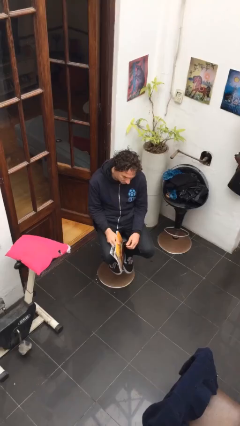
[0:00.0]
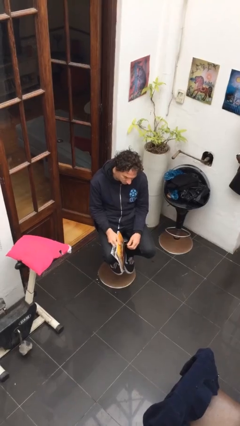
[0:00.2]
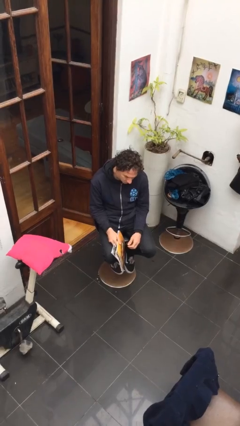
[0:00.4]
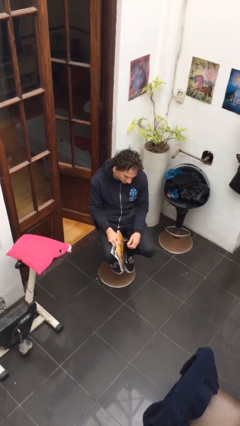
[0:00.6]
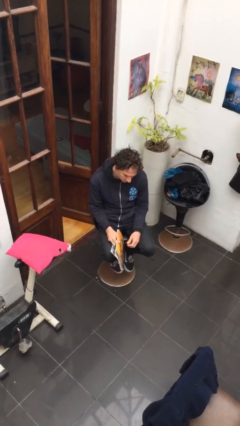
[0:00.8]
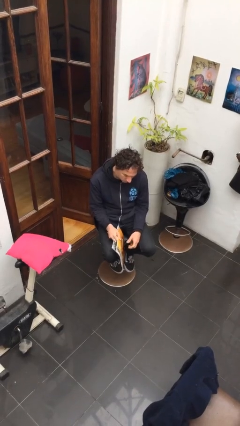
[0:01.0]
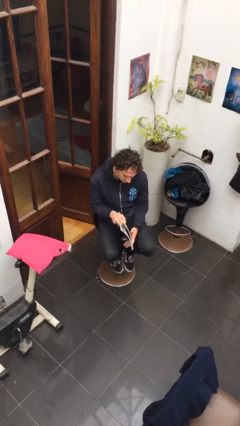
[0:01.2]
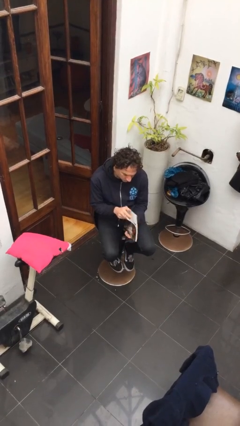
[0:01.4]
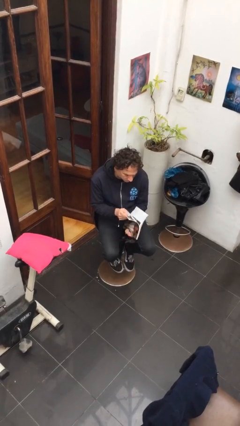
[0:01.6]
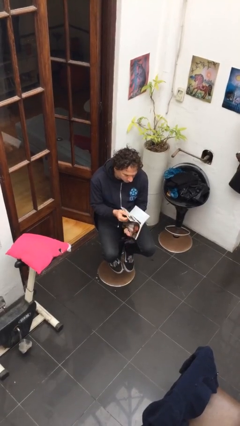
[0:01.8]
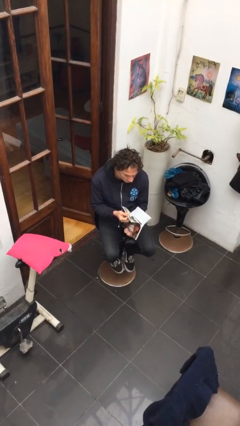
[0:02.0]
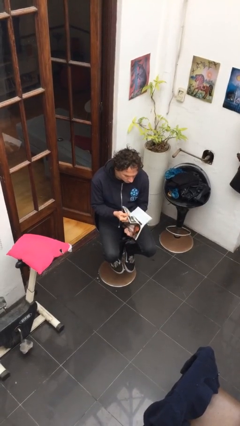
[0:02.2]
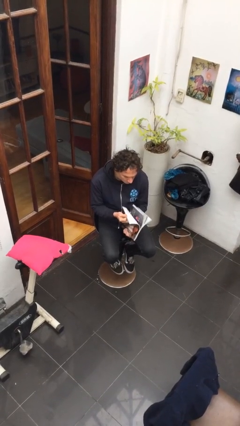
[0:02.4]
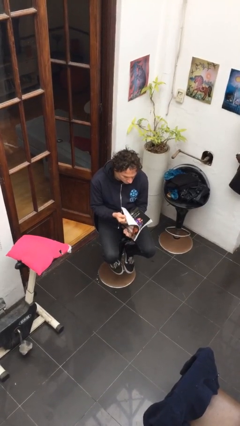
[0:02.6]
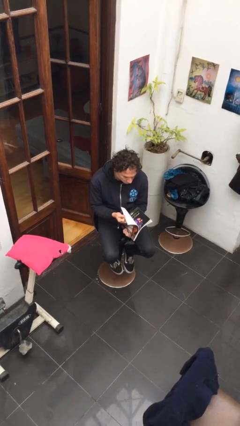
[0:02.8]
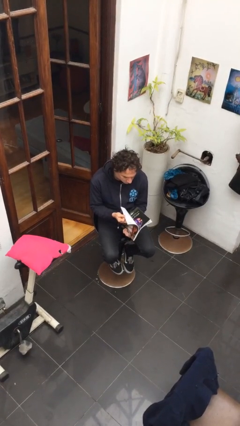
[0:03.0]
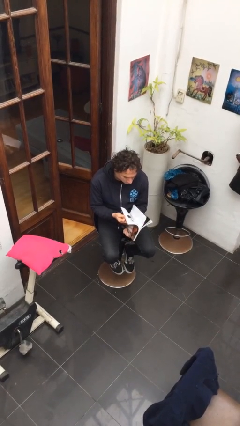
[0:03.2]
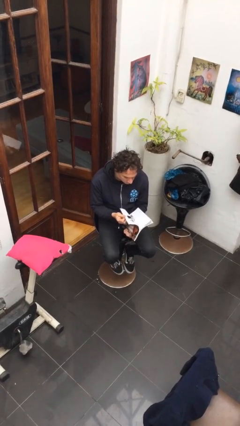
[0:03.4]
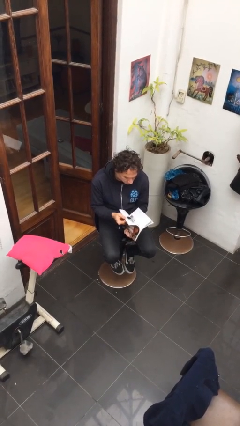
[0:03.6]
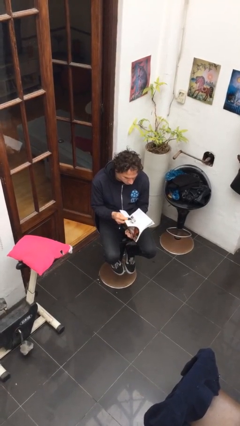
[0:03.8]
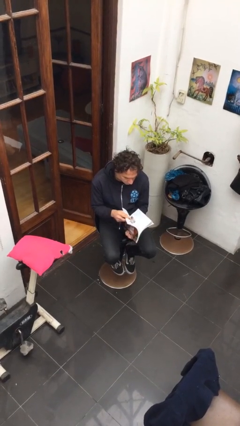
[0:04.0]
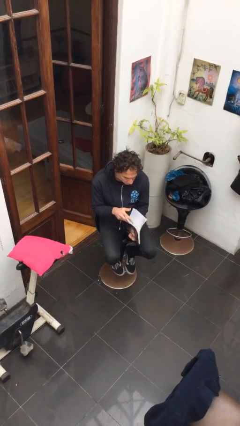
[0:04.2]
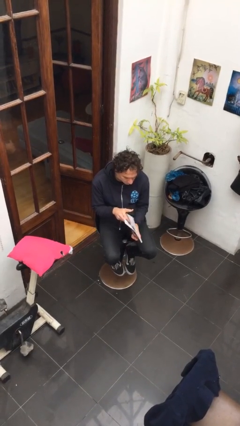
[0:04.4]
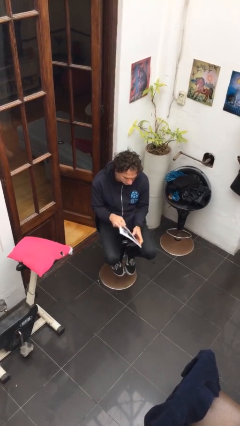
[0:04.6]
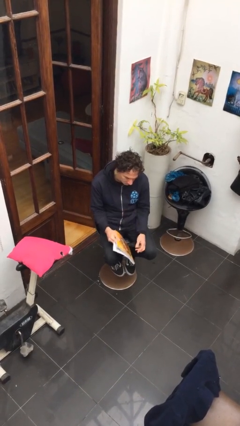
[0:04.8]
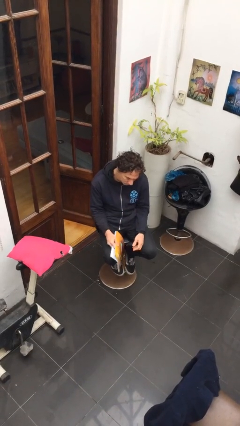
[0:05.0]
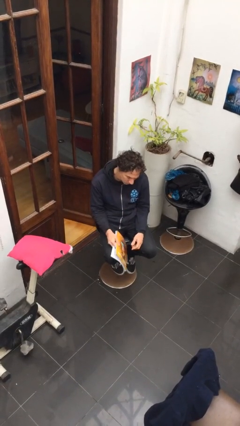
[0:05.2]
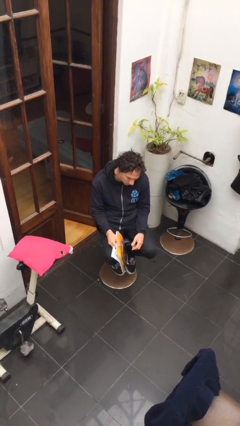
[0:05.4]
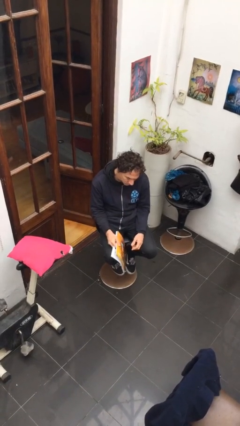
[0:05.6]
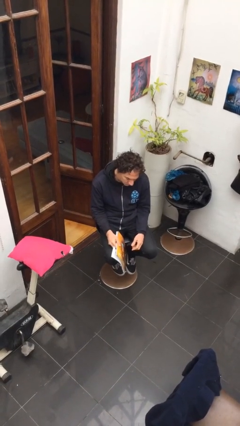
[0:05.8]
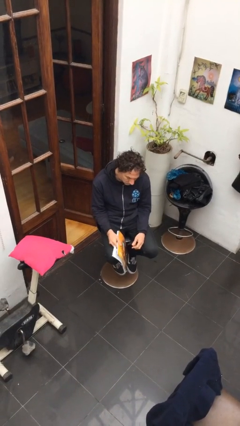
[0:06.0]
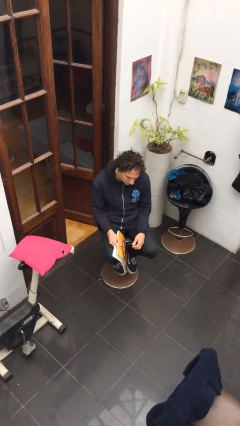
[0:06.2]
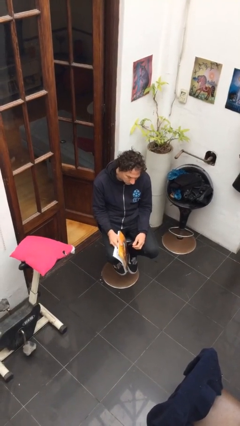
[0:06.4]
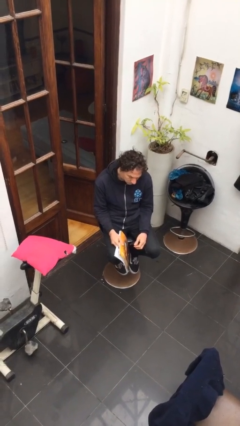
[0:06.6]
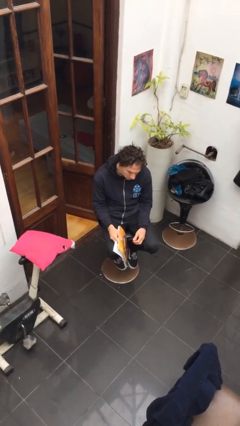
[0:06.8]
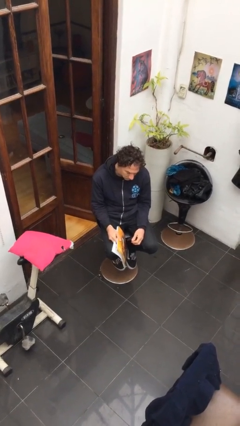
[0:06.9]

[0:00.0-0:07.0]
person reads magazine

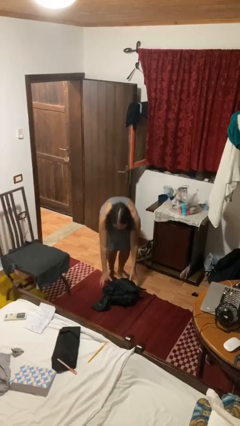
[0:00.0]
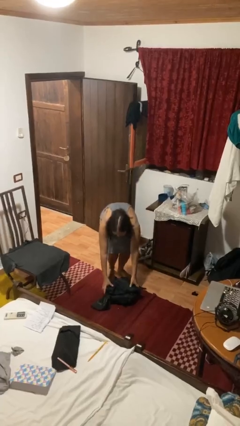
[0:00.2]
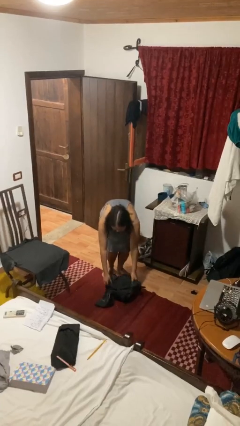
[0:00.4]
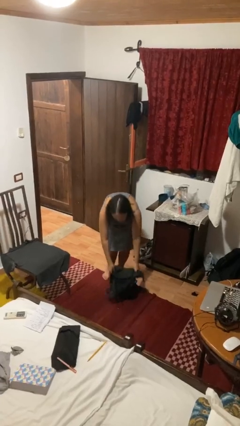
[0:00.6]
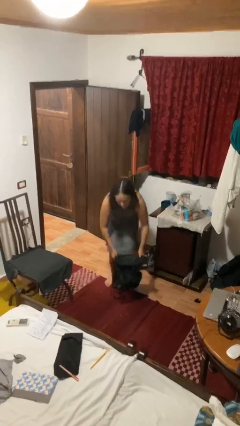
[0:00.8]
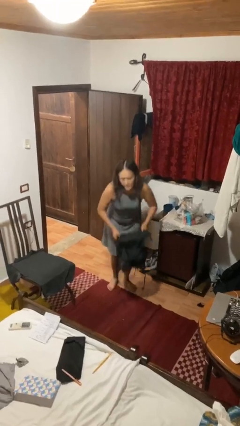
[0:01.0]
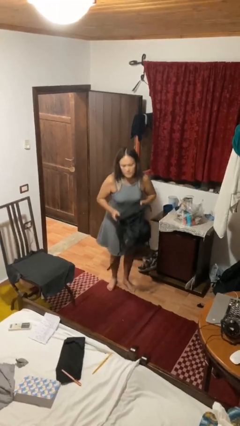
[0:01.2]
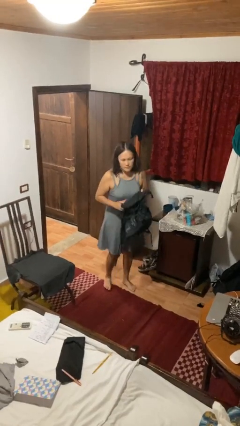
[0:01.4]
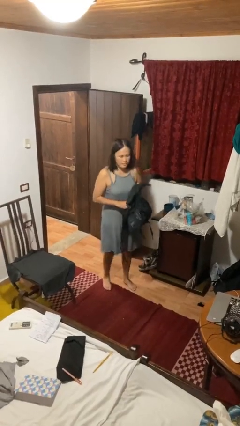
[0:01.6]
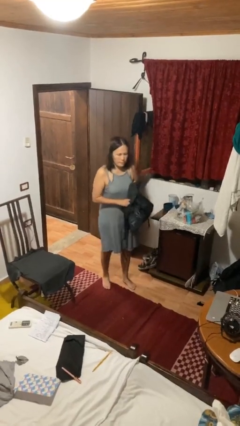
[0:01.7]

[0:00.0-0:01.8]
person picks up object from floor

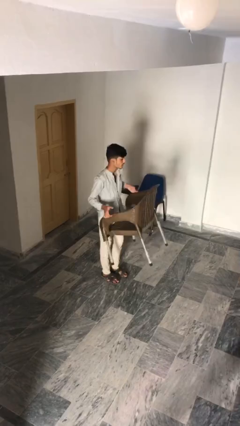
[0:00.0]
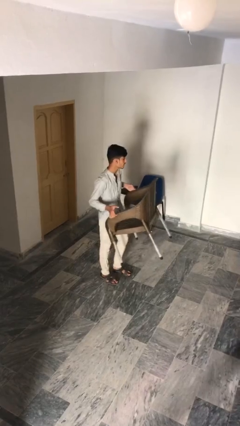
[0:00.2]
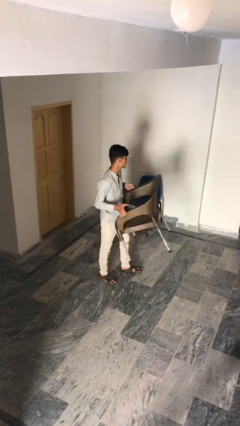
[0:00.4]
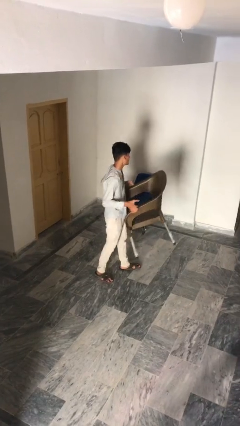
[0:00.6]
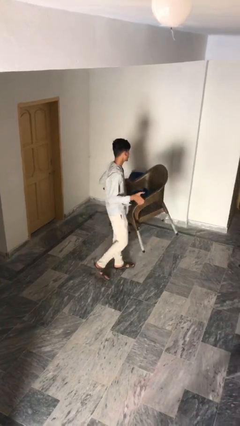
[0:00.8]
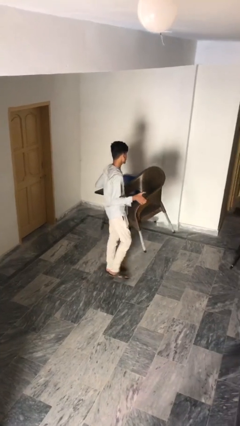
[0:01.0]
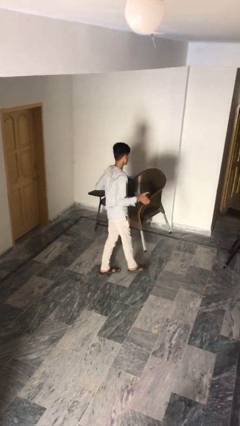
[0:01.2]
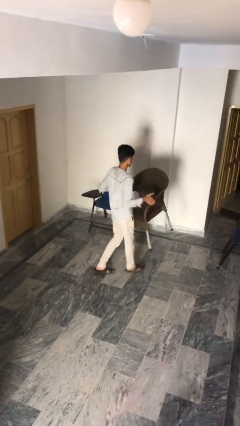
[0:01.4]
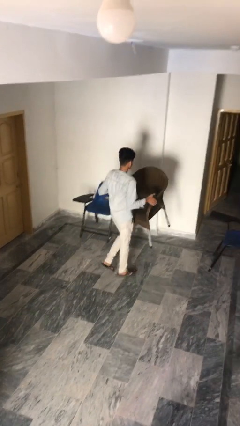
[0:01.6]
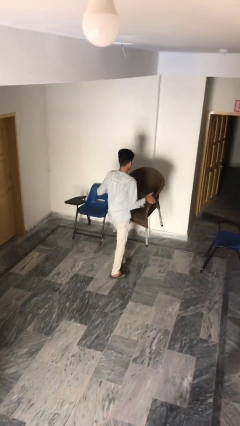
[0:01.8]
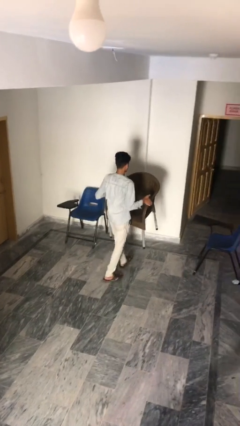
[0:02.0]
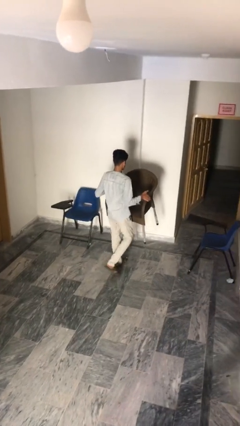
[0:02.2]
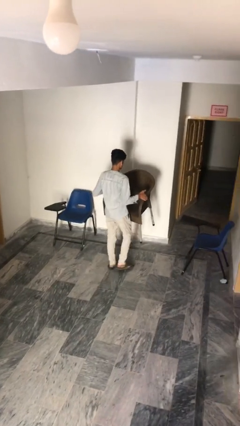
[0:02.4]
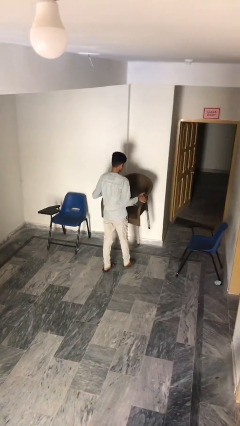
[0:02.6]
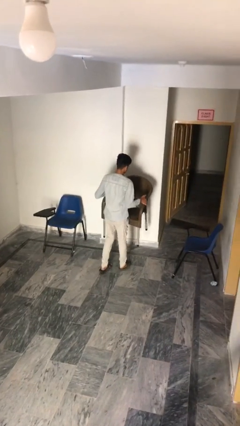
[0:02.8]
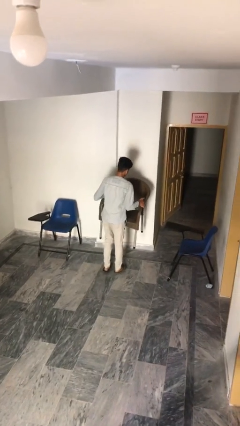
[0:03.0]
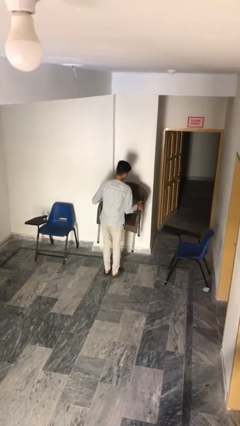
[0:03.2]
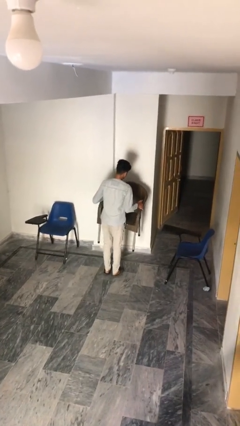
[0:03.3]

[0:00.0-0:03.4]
person carries heavy object

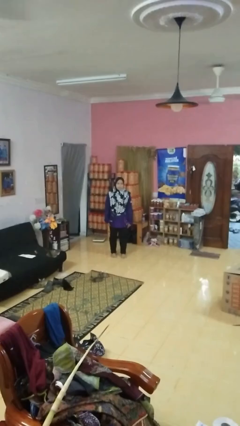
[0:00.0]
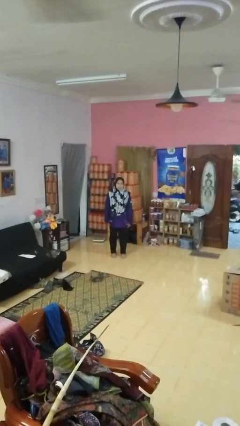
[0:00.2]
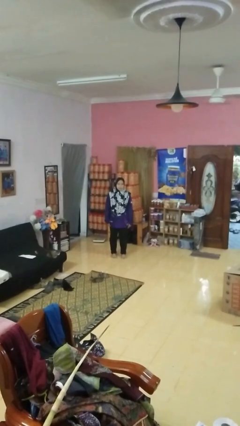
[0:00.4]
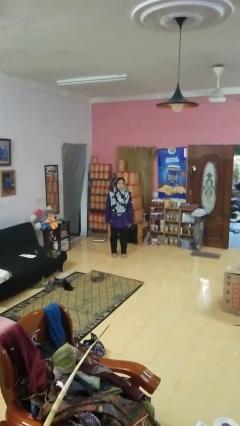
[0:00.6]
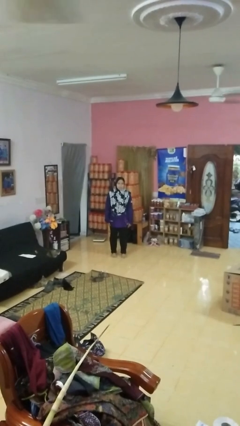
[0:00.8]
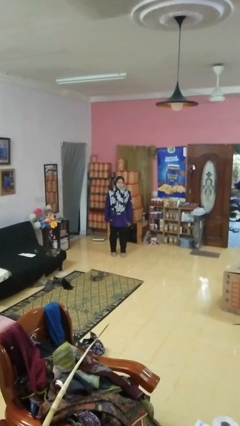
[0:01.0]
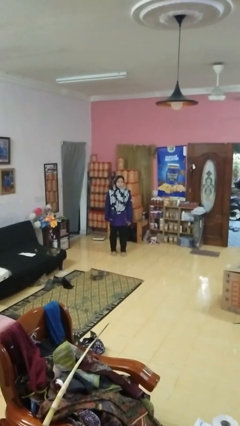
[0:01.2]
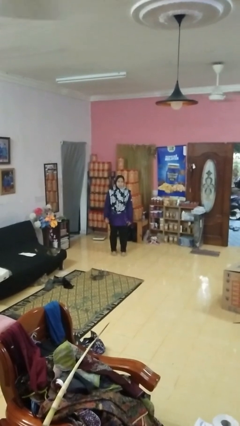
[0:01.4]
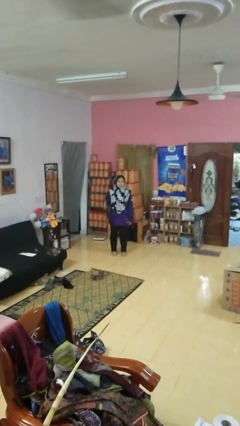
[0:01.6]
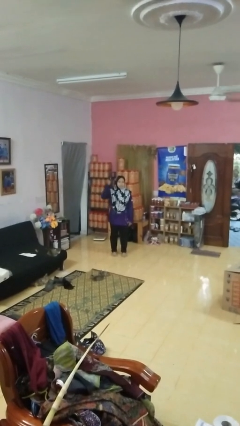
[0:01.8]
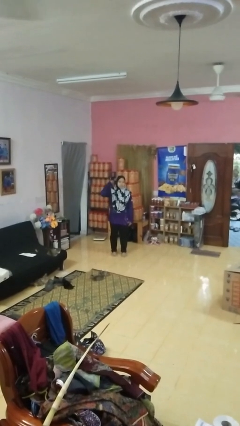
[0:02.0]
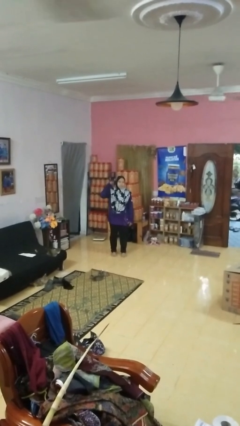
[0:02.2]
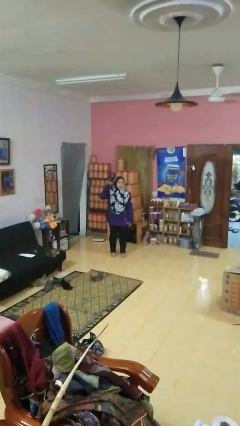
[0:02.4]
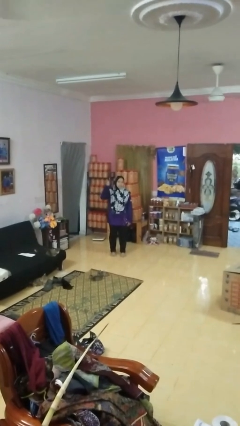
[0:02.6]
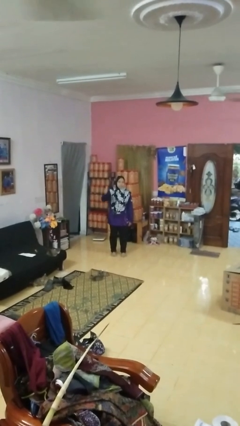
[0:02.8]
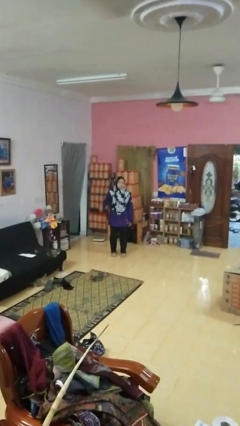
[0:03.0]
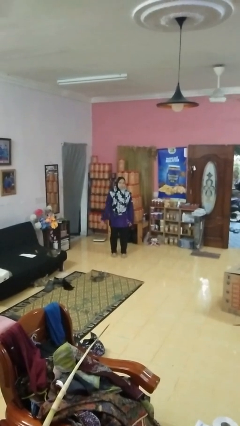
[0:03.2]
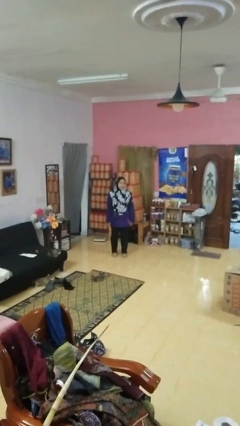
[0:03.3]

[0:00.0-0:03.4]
person gestures behind me

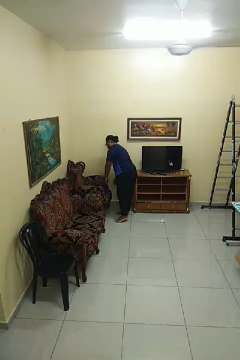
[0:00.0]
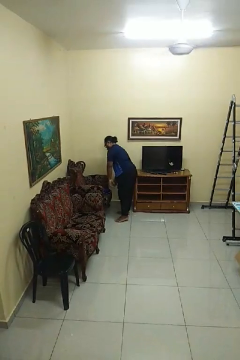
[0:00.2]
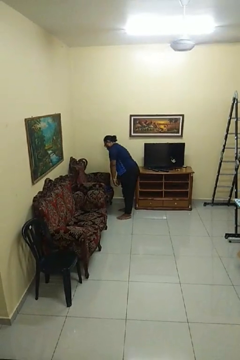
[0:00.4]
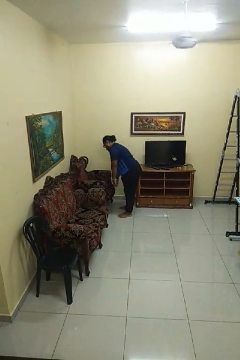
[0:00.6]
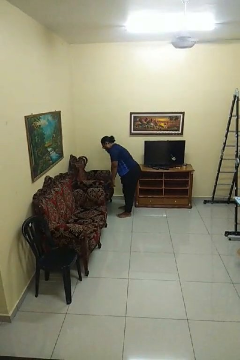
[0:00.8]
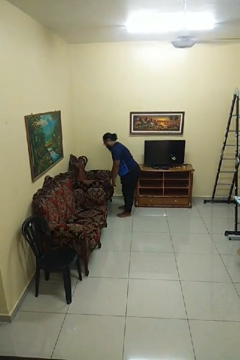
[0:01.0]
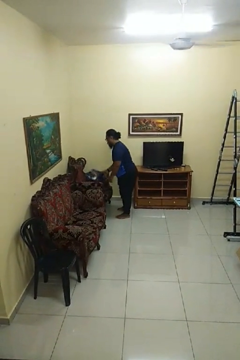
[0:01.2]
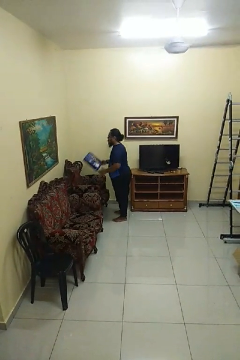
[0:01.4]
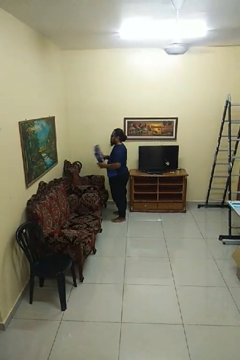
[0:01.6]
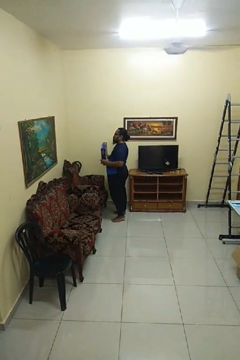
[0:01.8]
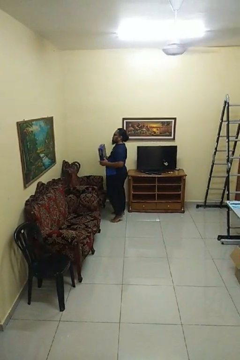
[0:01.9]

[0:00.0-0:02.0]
person picks up object from couch
